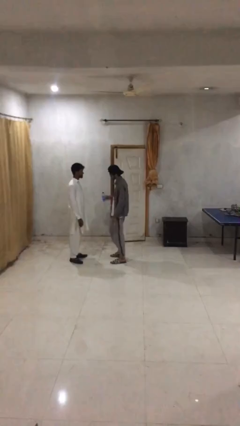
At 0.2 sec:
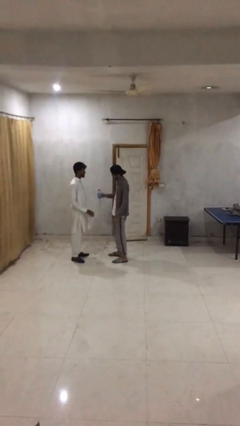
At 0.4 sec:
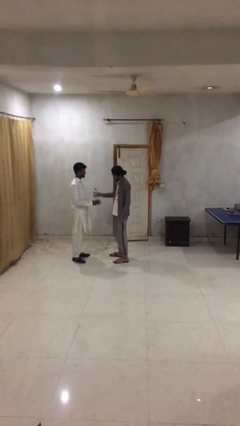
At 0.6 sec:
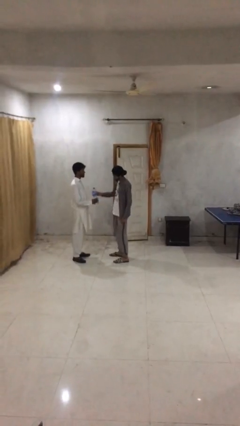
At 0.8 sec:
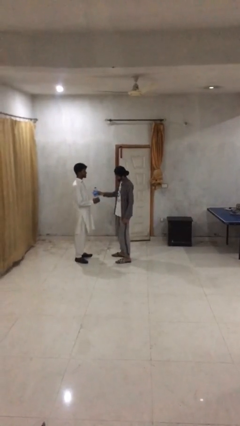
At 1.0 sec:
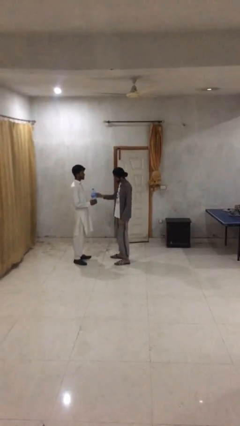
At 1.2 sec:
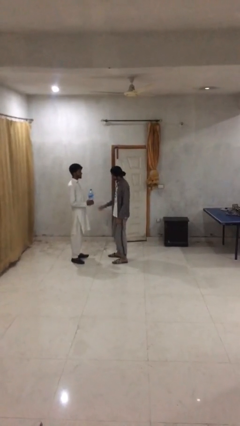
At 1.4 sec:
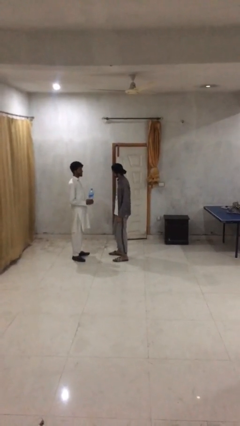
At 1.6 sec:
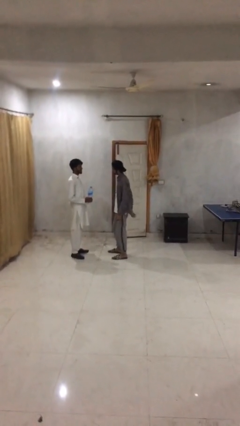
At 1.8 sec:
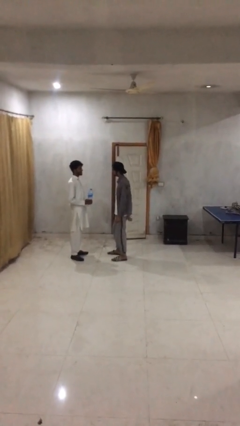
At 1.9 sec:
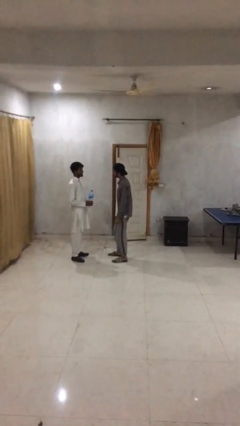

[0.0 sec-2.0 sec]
person transfers object to person

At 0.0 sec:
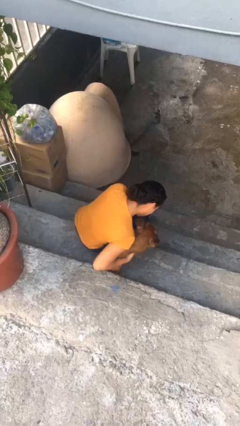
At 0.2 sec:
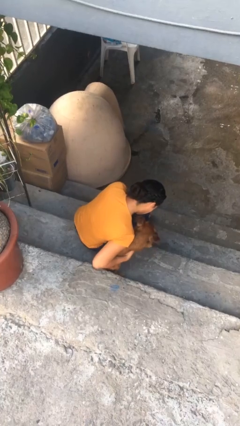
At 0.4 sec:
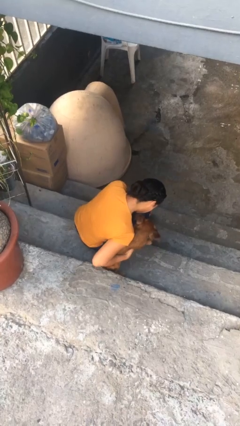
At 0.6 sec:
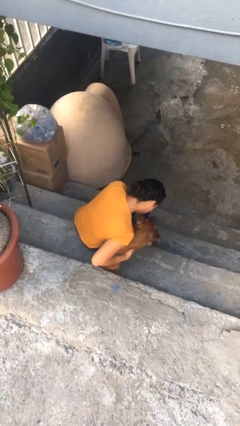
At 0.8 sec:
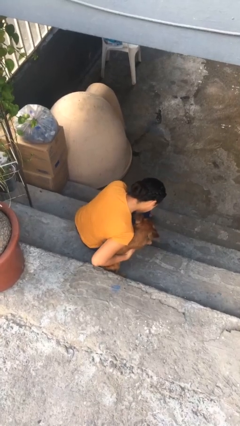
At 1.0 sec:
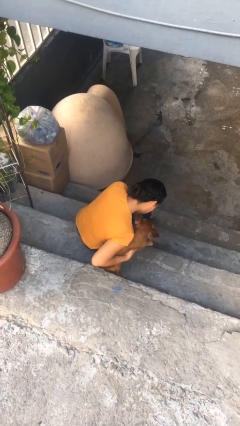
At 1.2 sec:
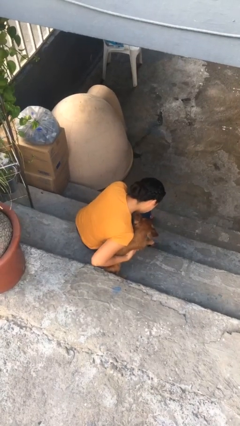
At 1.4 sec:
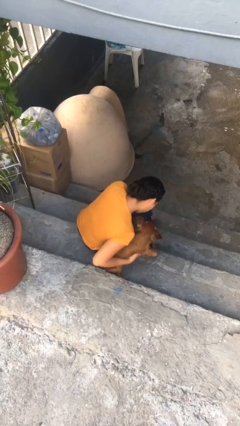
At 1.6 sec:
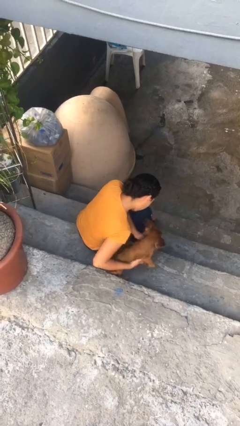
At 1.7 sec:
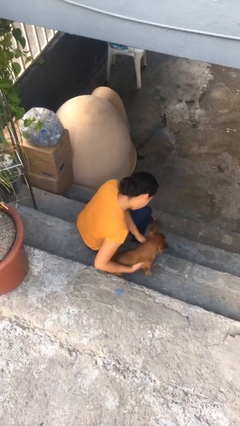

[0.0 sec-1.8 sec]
person hugs dog

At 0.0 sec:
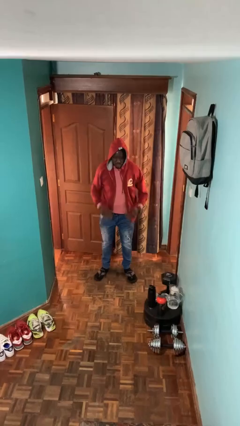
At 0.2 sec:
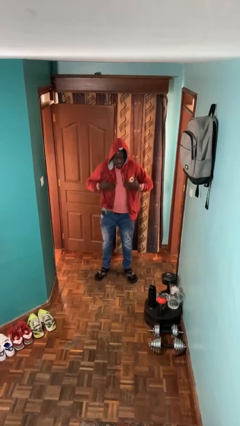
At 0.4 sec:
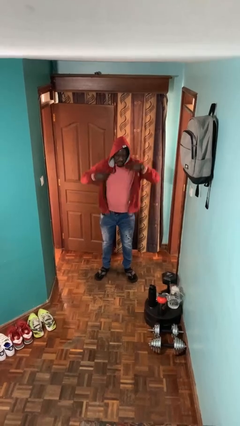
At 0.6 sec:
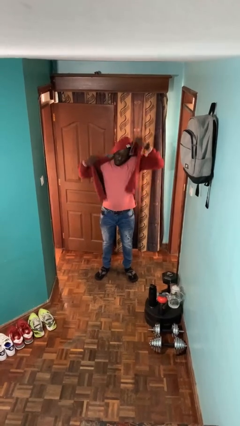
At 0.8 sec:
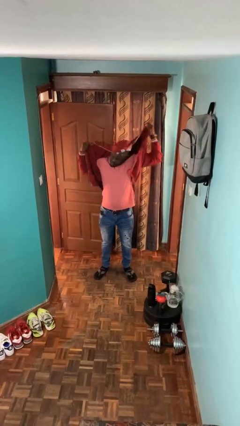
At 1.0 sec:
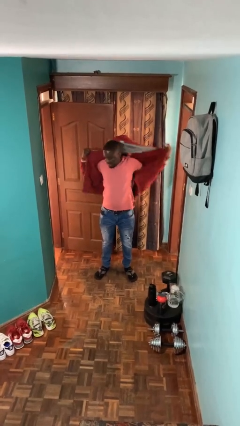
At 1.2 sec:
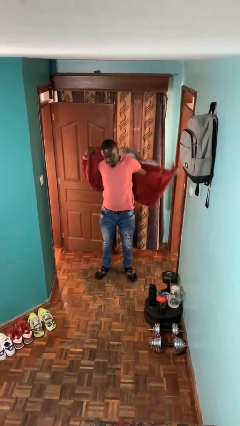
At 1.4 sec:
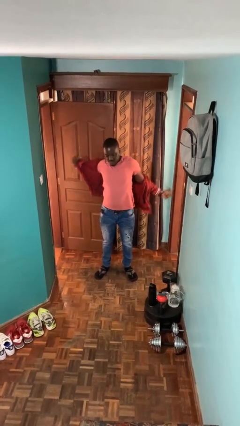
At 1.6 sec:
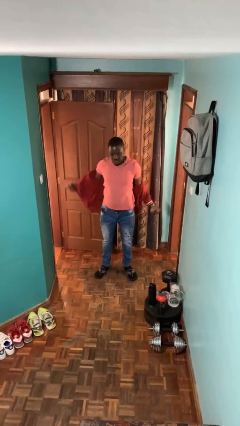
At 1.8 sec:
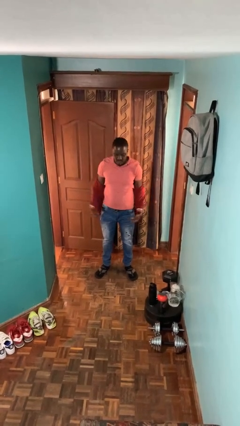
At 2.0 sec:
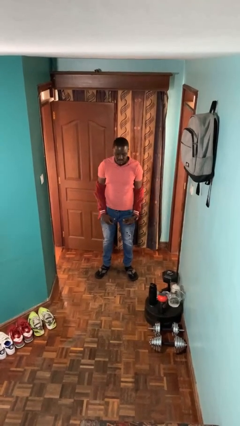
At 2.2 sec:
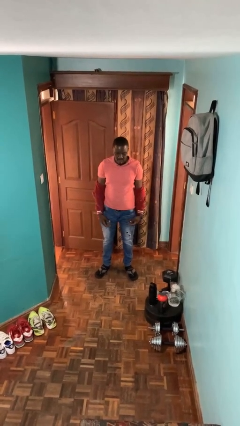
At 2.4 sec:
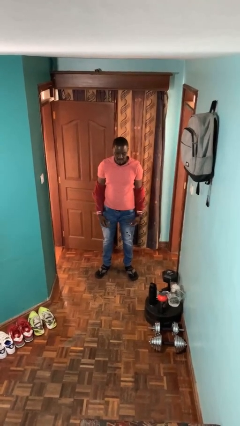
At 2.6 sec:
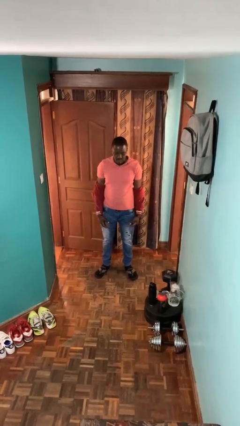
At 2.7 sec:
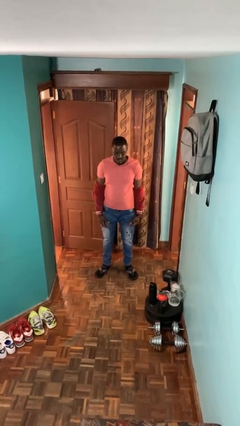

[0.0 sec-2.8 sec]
person takes off jacket

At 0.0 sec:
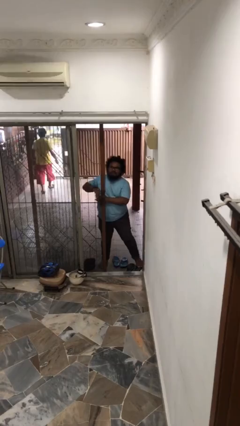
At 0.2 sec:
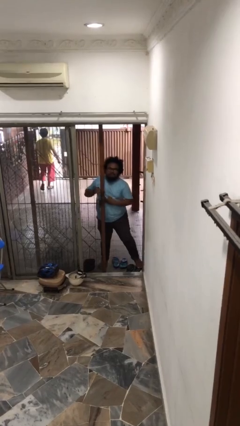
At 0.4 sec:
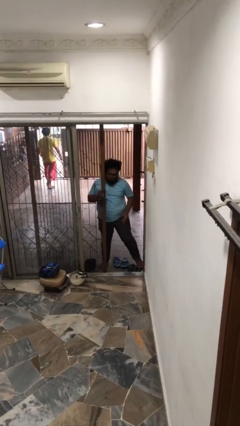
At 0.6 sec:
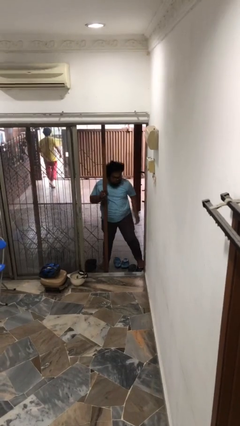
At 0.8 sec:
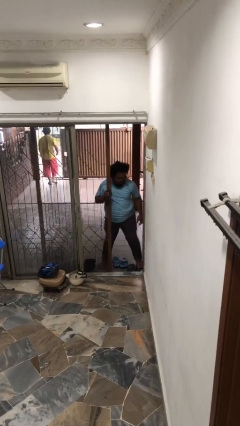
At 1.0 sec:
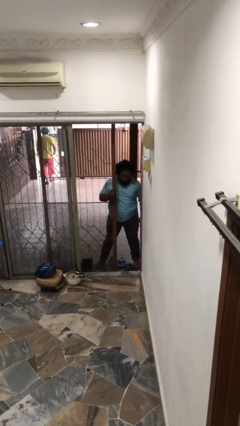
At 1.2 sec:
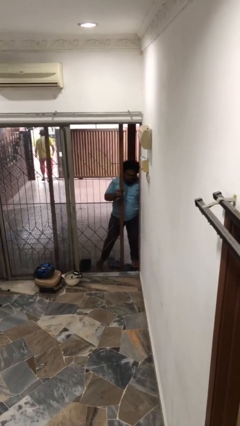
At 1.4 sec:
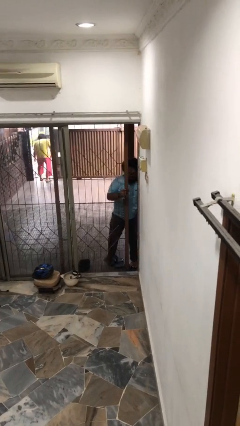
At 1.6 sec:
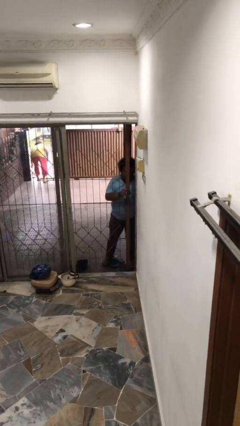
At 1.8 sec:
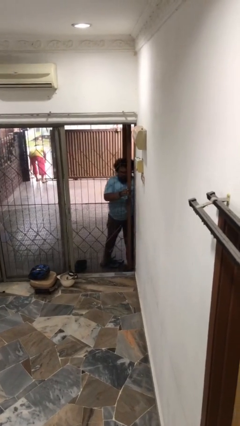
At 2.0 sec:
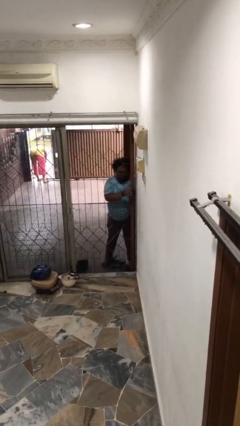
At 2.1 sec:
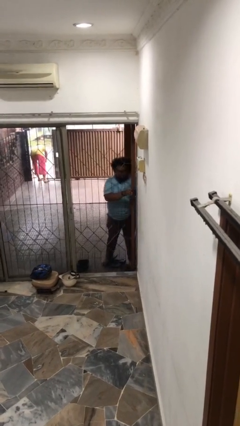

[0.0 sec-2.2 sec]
person closes facility door

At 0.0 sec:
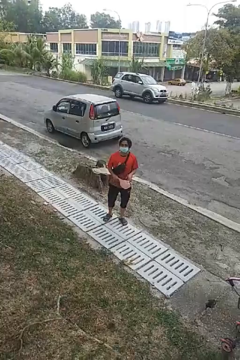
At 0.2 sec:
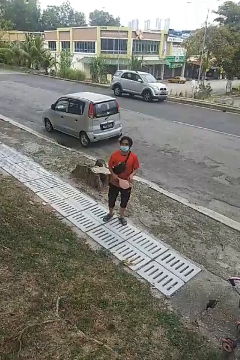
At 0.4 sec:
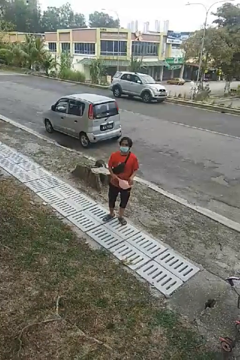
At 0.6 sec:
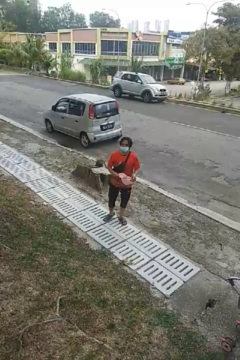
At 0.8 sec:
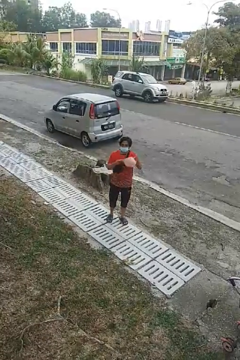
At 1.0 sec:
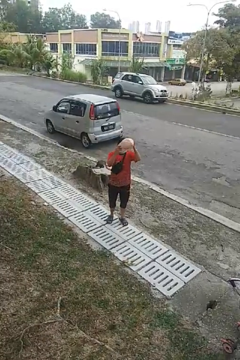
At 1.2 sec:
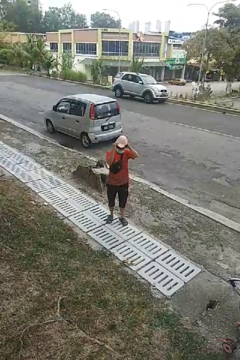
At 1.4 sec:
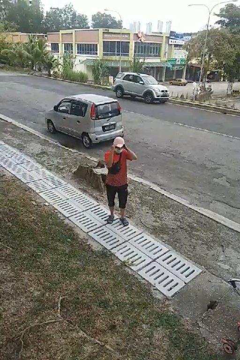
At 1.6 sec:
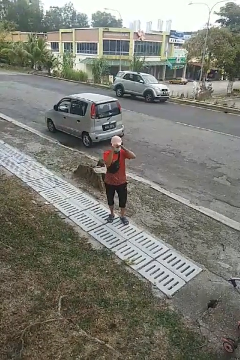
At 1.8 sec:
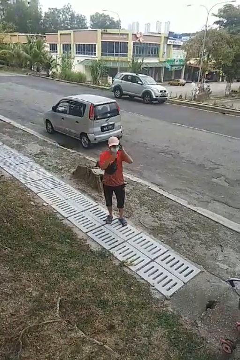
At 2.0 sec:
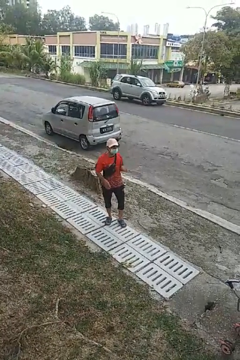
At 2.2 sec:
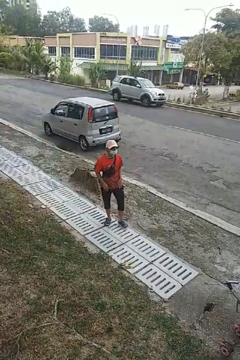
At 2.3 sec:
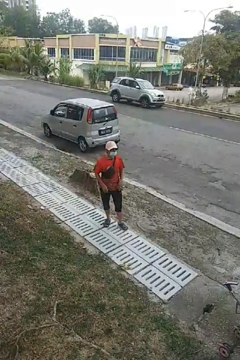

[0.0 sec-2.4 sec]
person puts on hat

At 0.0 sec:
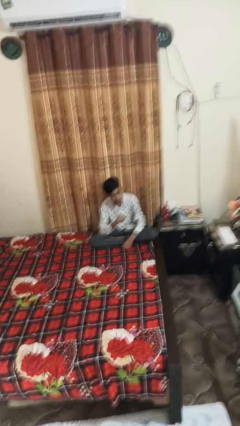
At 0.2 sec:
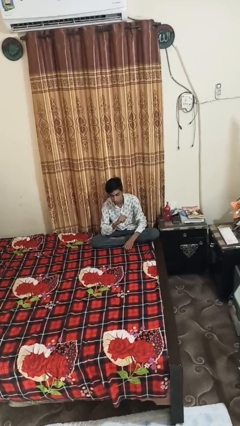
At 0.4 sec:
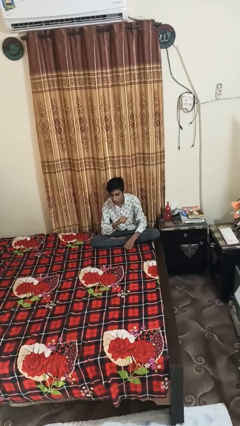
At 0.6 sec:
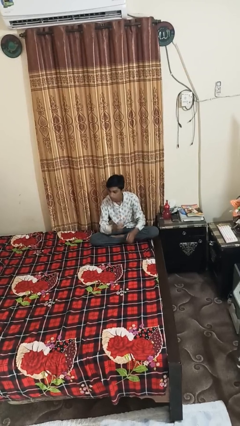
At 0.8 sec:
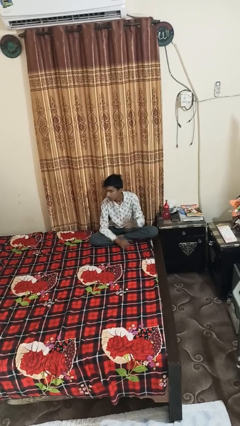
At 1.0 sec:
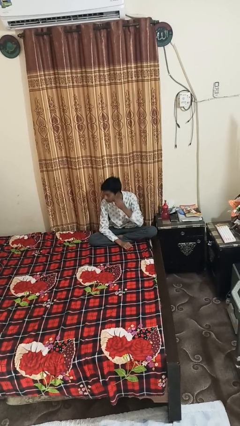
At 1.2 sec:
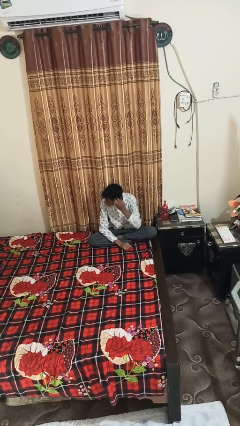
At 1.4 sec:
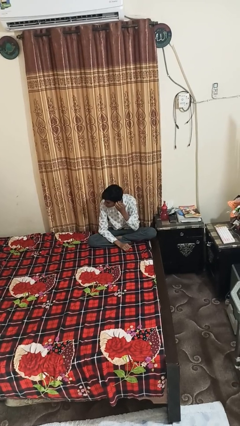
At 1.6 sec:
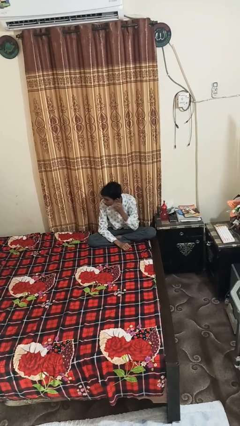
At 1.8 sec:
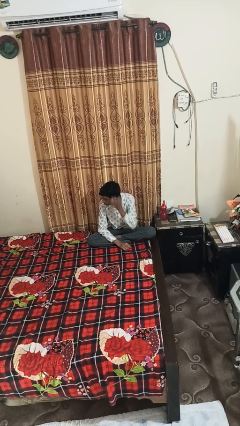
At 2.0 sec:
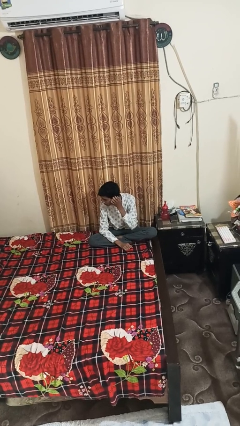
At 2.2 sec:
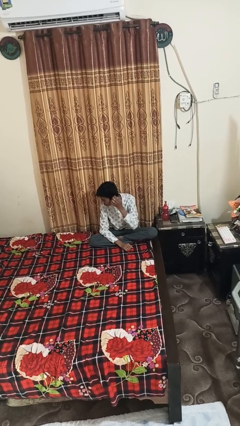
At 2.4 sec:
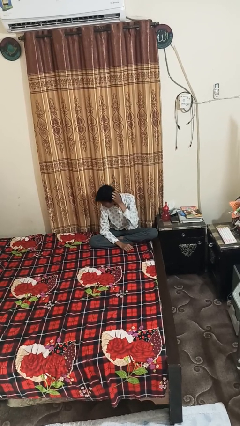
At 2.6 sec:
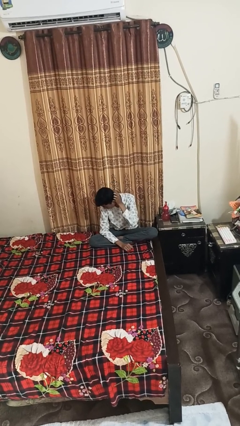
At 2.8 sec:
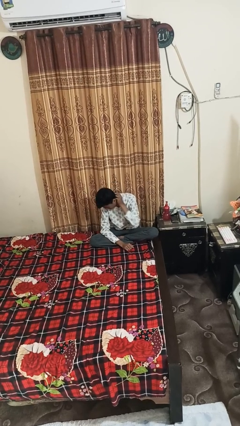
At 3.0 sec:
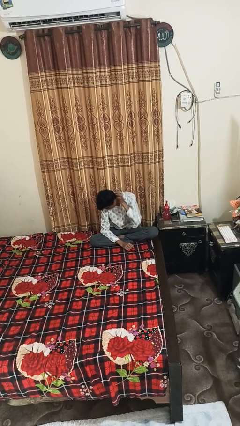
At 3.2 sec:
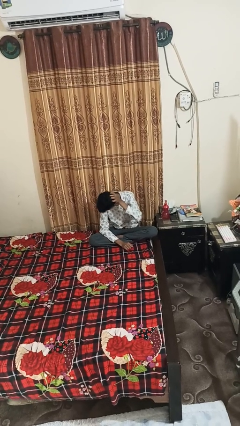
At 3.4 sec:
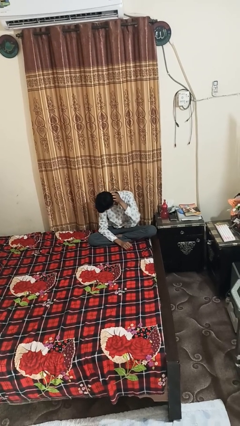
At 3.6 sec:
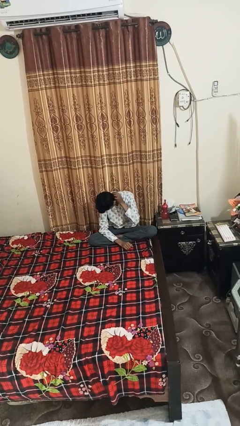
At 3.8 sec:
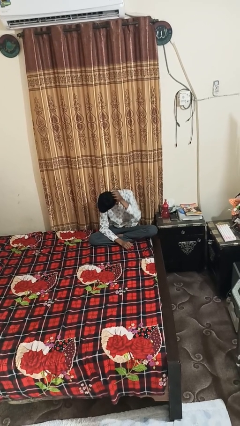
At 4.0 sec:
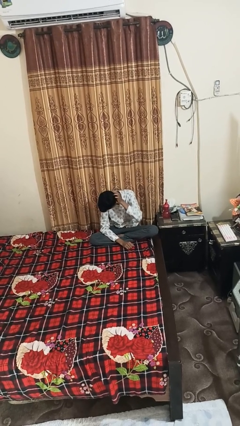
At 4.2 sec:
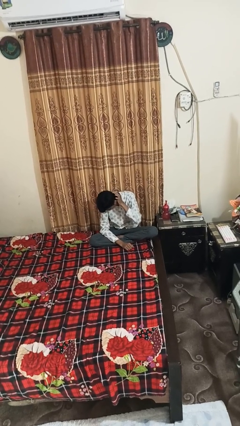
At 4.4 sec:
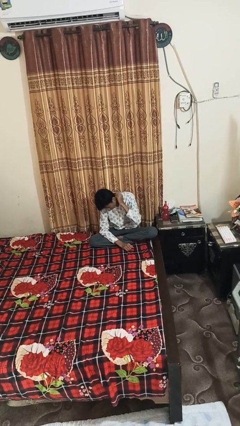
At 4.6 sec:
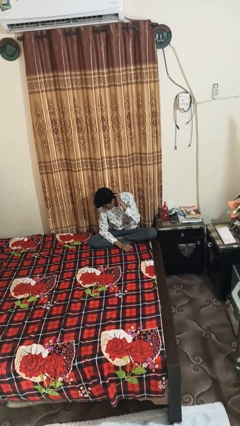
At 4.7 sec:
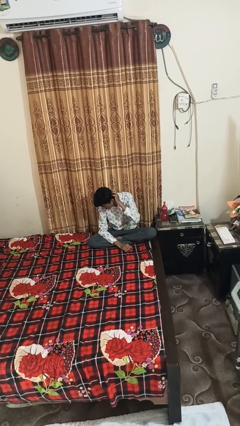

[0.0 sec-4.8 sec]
person strokes hair

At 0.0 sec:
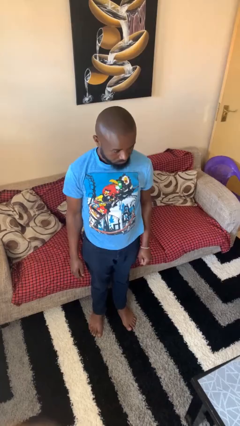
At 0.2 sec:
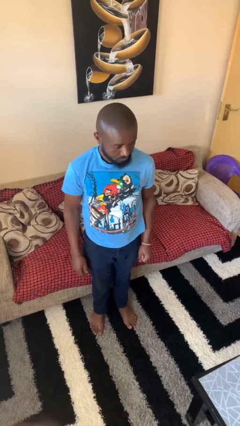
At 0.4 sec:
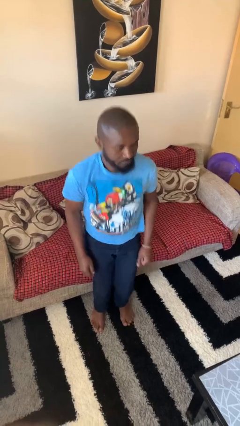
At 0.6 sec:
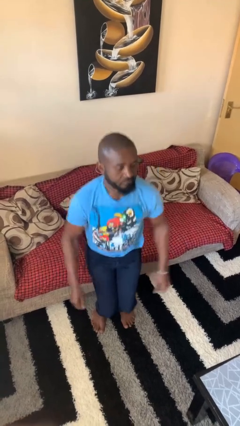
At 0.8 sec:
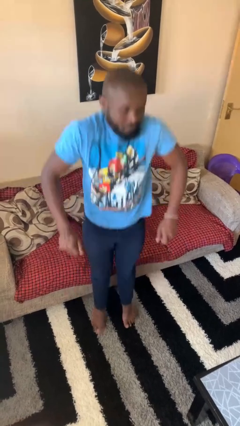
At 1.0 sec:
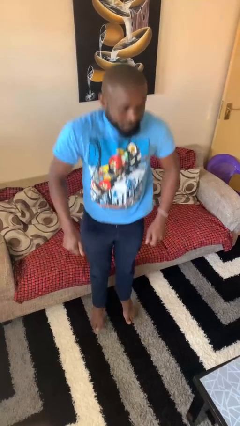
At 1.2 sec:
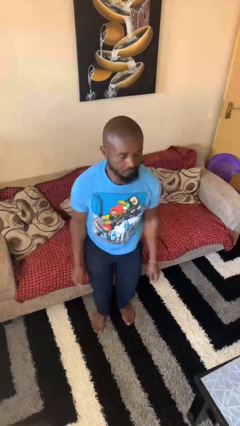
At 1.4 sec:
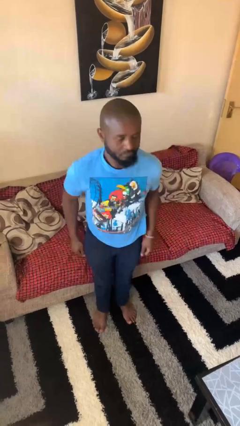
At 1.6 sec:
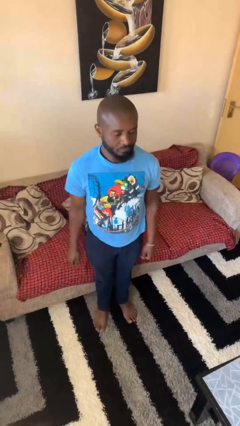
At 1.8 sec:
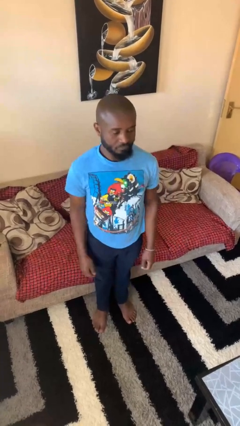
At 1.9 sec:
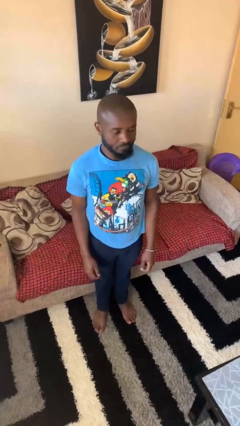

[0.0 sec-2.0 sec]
person jumps
